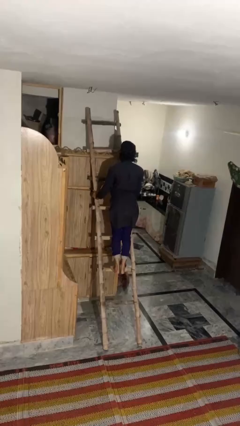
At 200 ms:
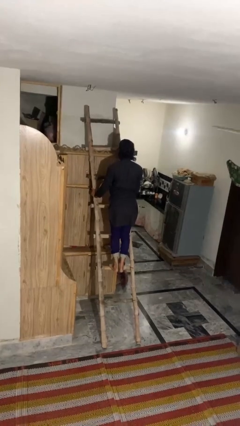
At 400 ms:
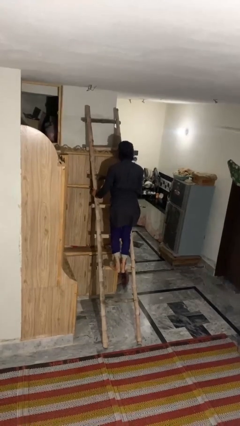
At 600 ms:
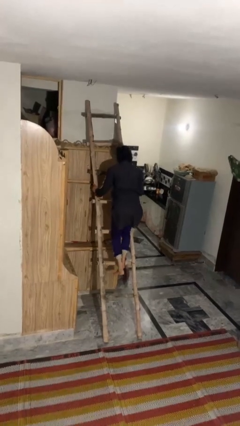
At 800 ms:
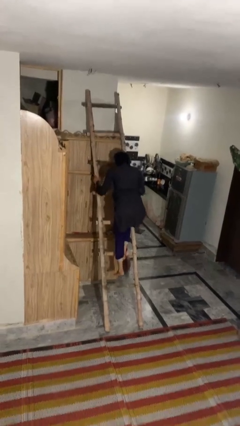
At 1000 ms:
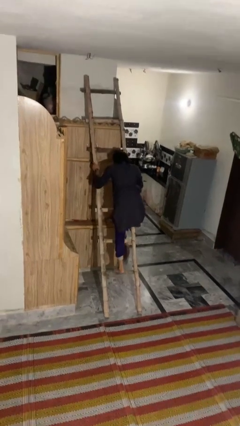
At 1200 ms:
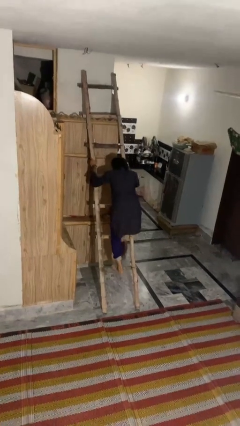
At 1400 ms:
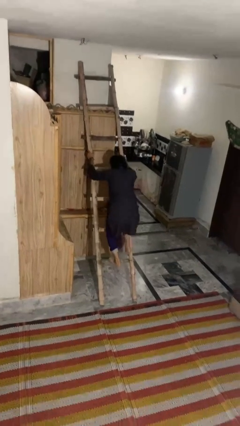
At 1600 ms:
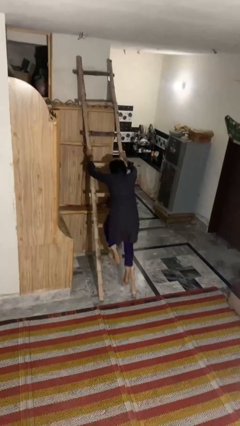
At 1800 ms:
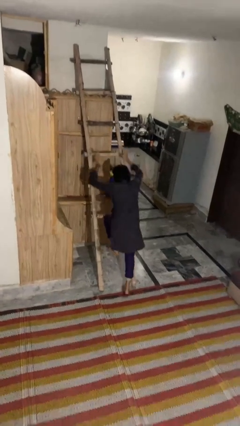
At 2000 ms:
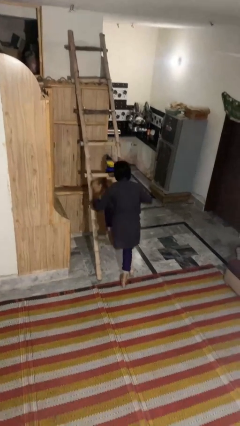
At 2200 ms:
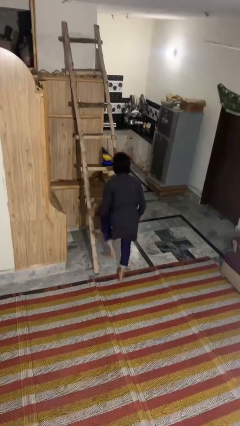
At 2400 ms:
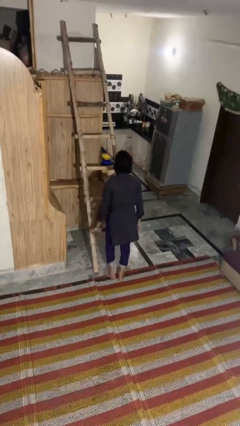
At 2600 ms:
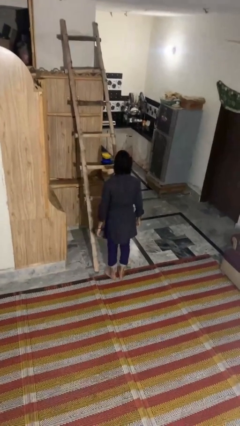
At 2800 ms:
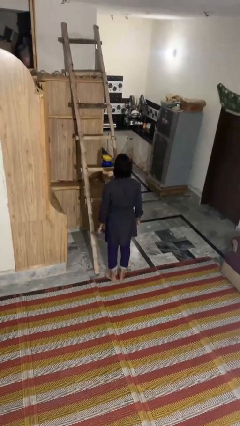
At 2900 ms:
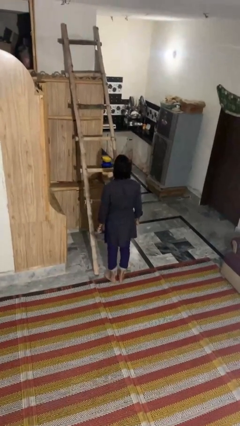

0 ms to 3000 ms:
person climbs down ladder

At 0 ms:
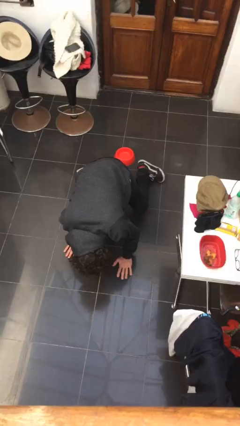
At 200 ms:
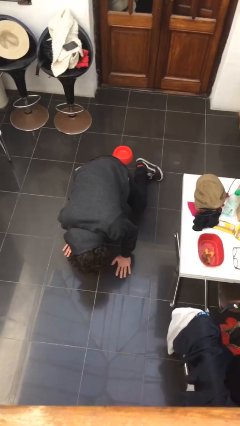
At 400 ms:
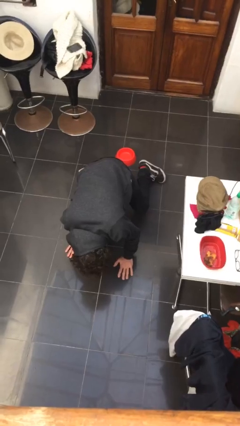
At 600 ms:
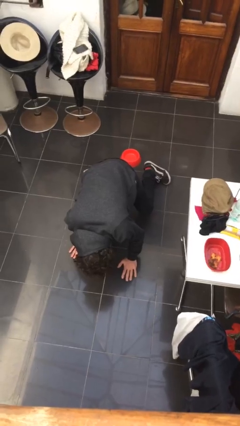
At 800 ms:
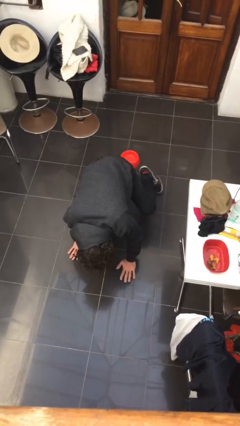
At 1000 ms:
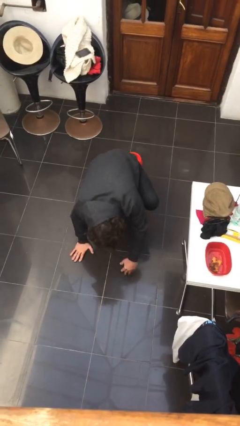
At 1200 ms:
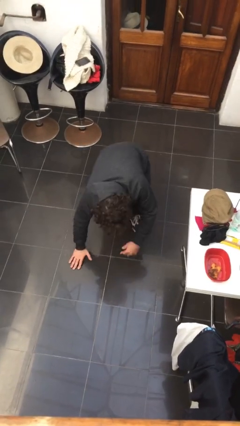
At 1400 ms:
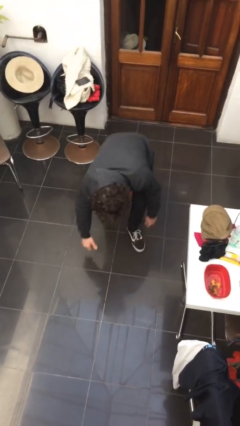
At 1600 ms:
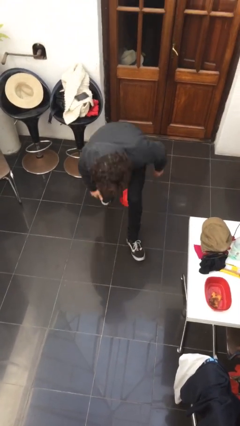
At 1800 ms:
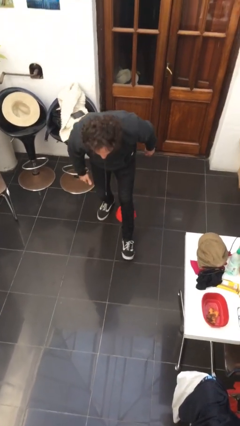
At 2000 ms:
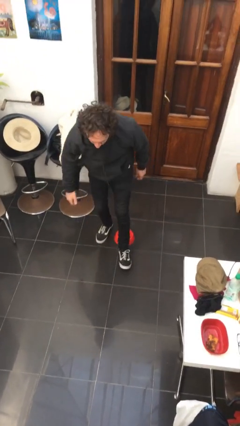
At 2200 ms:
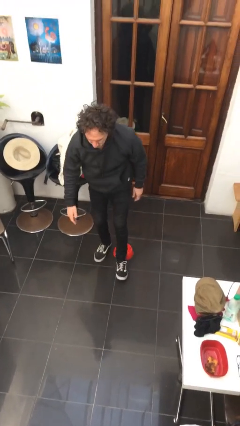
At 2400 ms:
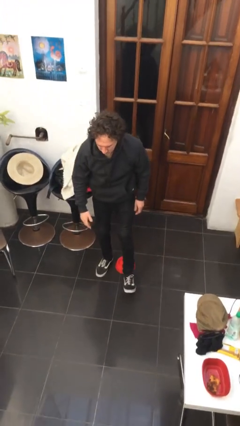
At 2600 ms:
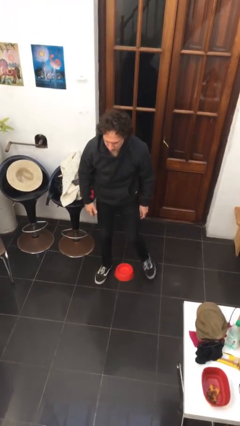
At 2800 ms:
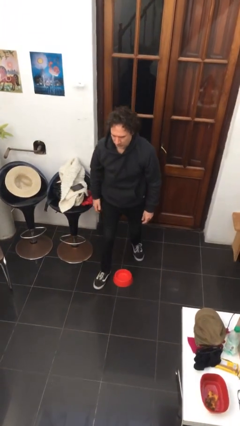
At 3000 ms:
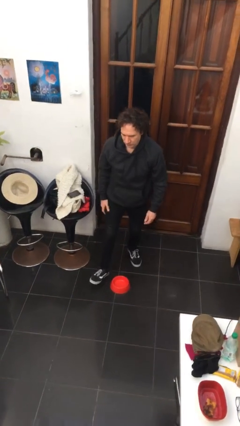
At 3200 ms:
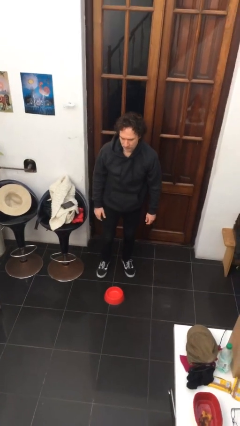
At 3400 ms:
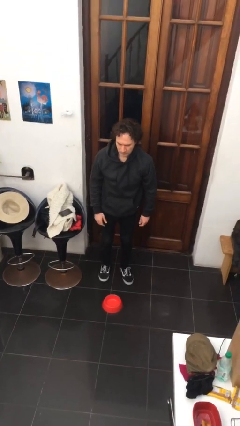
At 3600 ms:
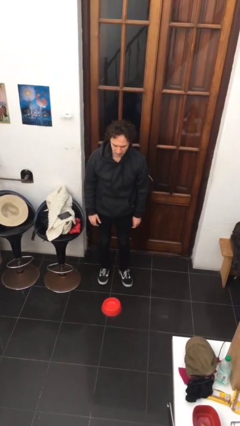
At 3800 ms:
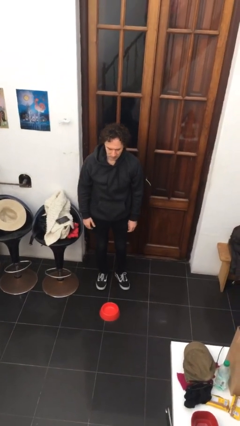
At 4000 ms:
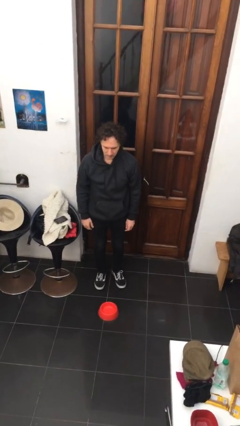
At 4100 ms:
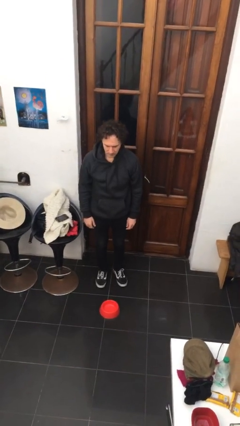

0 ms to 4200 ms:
person stands up from floor

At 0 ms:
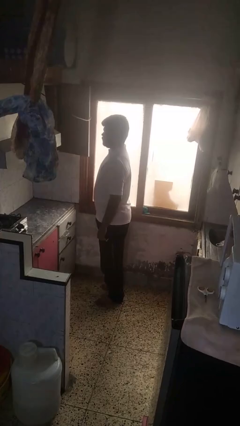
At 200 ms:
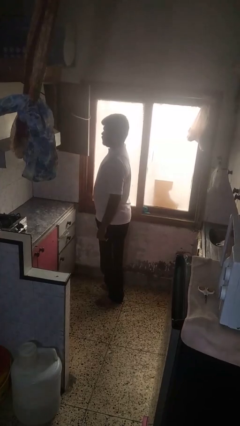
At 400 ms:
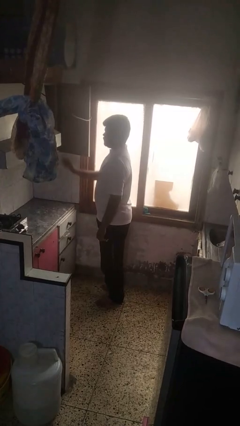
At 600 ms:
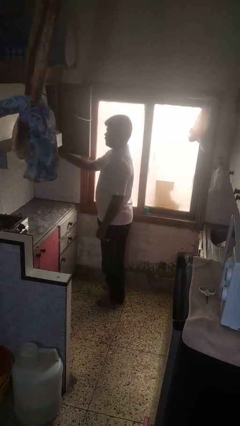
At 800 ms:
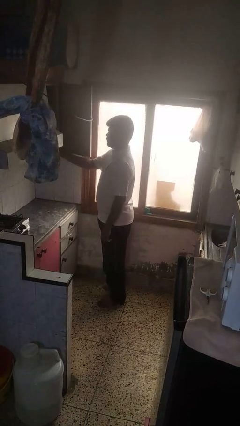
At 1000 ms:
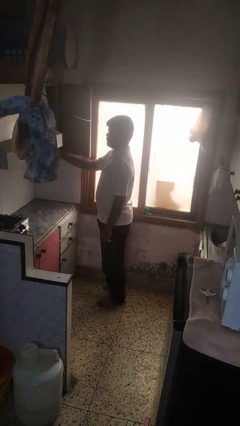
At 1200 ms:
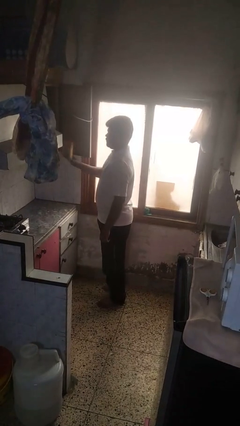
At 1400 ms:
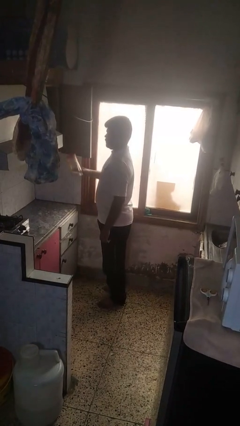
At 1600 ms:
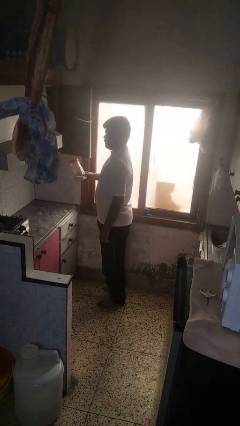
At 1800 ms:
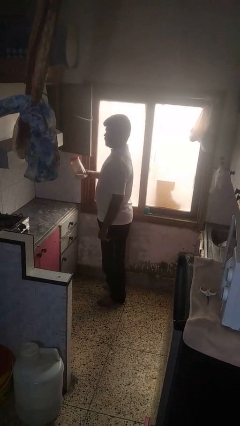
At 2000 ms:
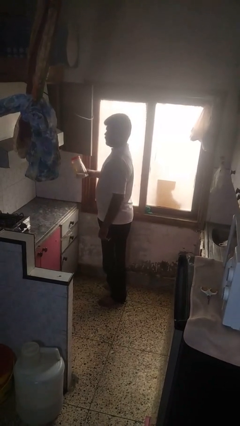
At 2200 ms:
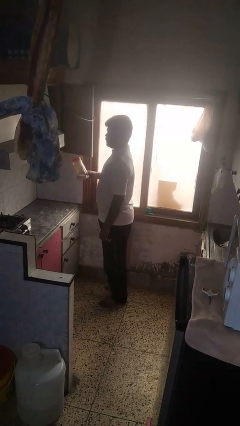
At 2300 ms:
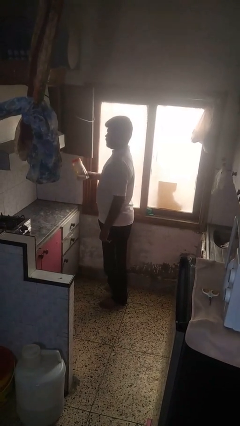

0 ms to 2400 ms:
person picks up object from cabinet

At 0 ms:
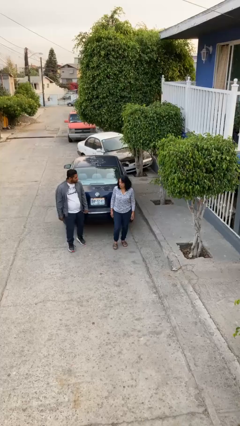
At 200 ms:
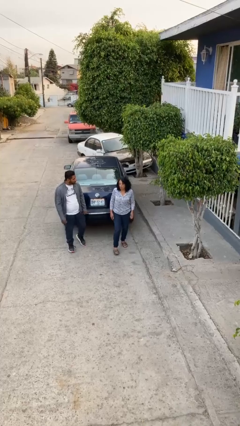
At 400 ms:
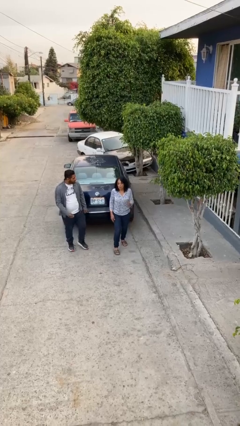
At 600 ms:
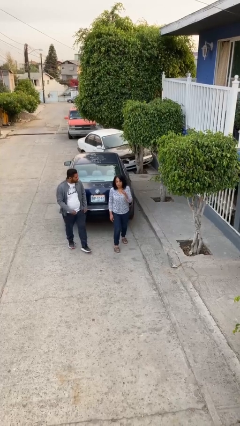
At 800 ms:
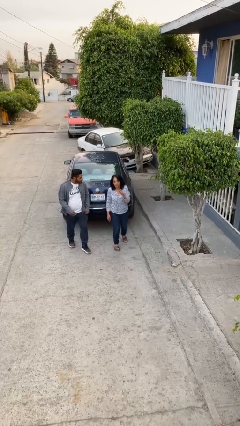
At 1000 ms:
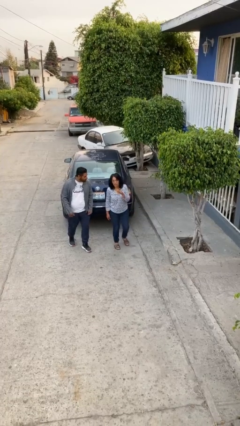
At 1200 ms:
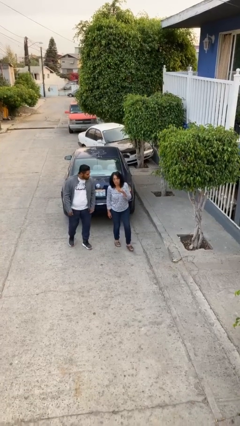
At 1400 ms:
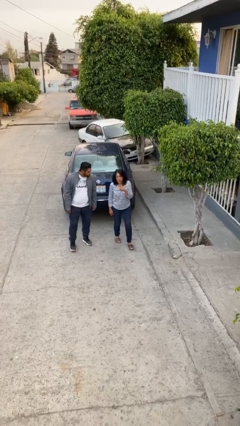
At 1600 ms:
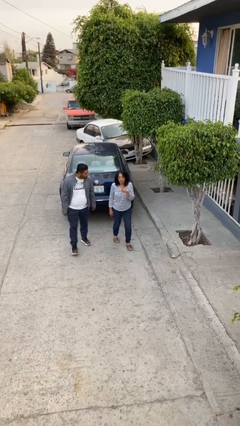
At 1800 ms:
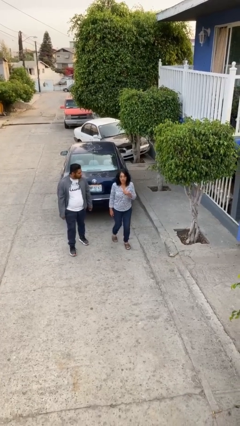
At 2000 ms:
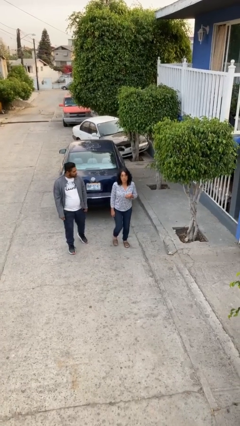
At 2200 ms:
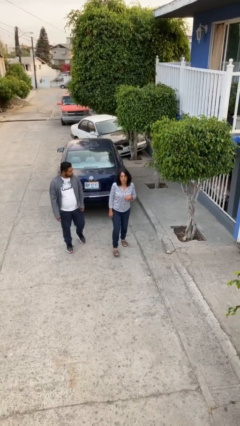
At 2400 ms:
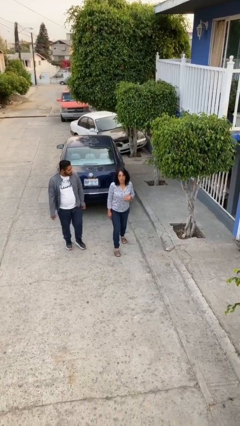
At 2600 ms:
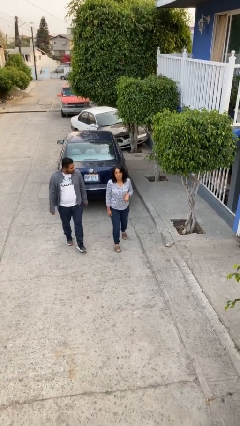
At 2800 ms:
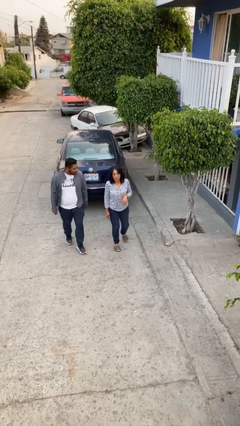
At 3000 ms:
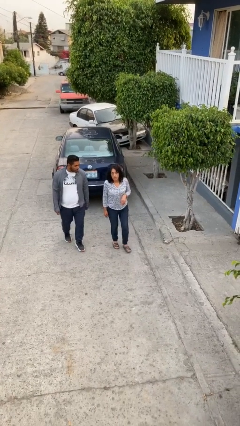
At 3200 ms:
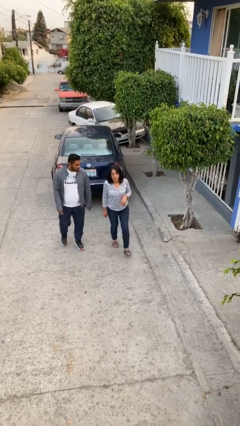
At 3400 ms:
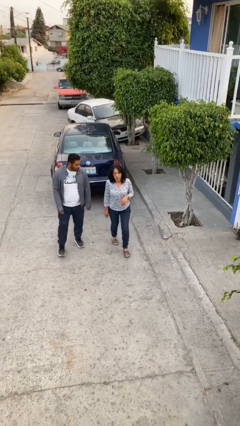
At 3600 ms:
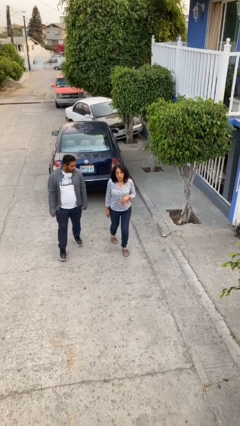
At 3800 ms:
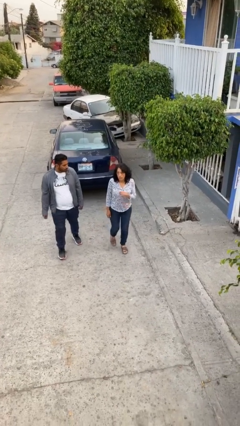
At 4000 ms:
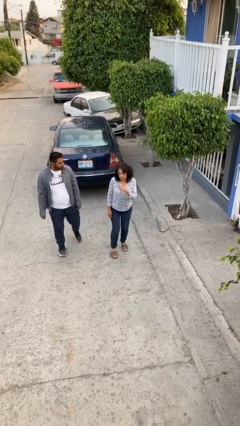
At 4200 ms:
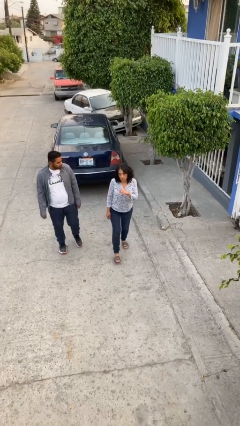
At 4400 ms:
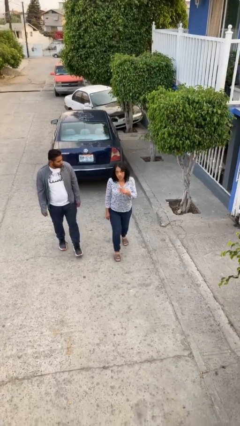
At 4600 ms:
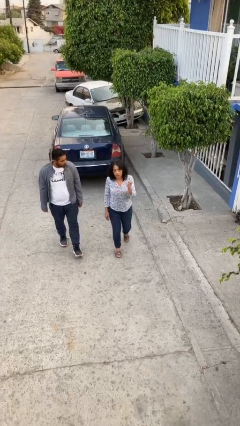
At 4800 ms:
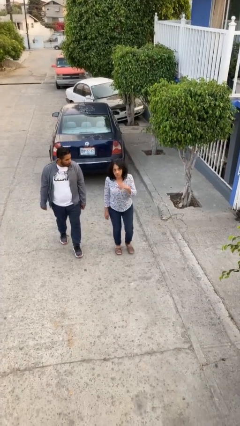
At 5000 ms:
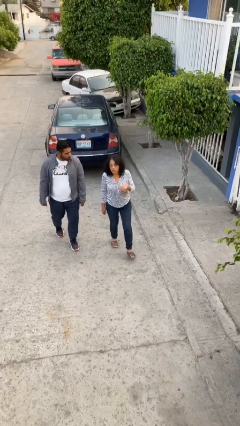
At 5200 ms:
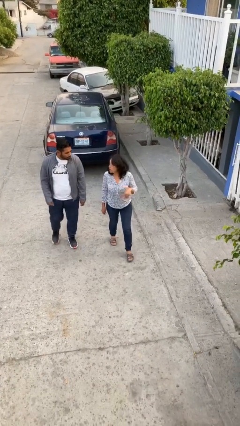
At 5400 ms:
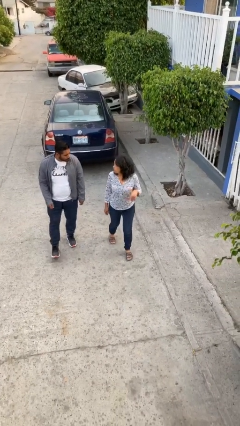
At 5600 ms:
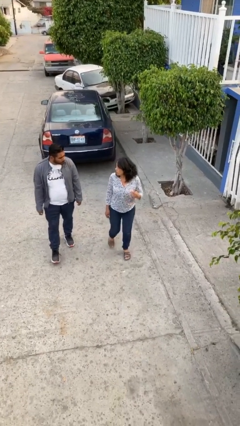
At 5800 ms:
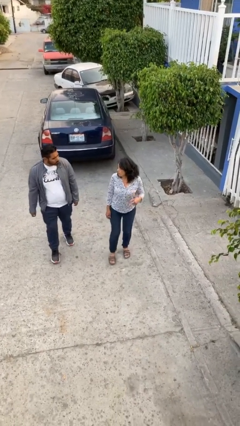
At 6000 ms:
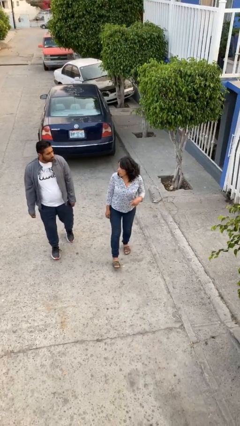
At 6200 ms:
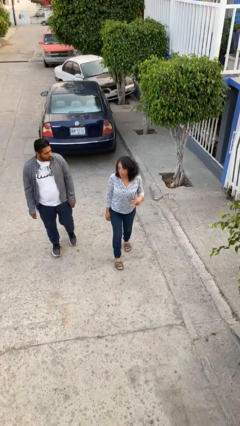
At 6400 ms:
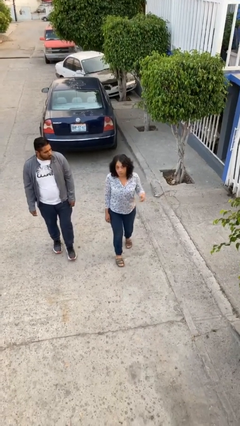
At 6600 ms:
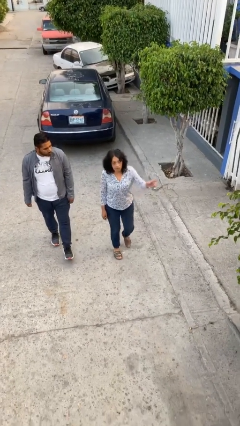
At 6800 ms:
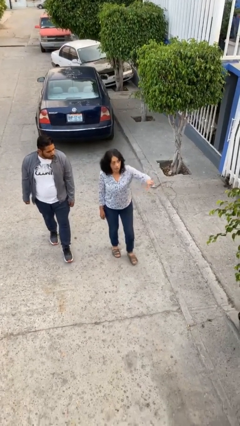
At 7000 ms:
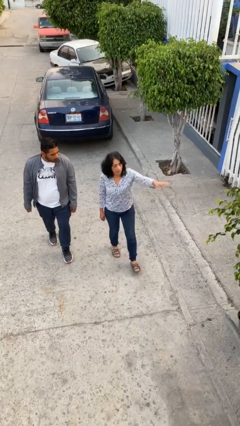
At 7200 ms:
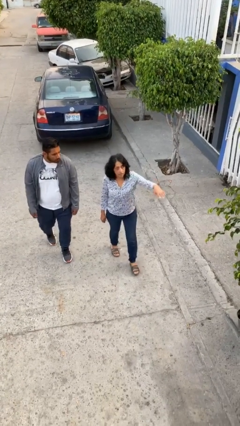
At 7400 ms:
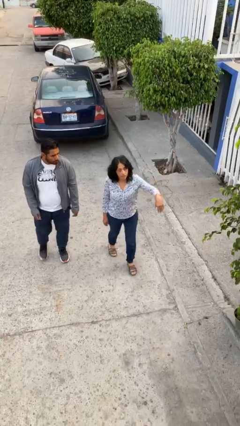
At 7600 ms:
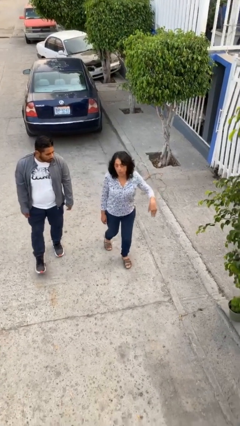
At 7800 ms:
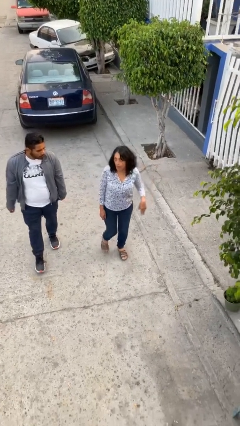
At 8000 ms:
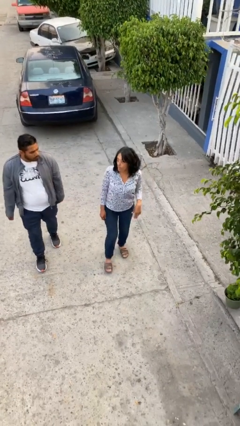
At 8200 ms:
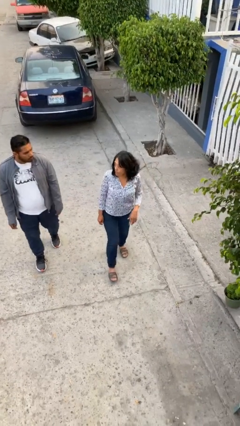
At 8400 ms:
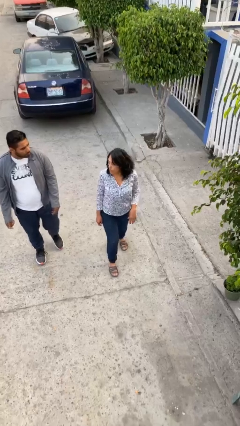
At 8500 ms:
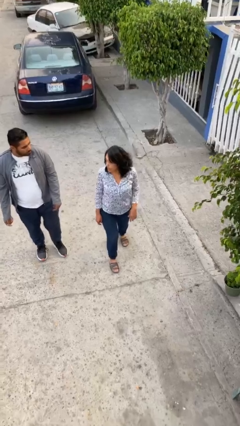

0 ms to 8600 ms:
person talks to person
